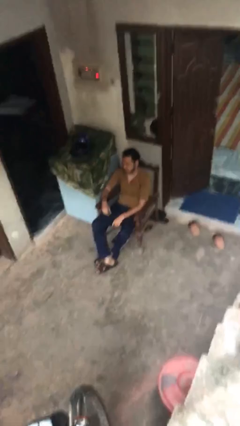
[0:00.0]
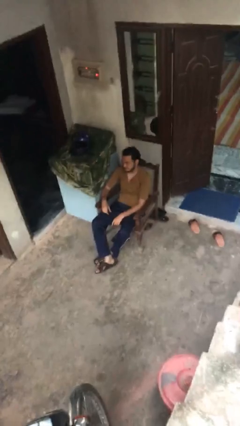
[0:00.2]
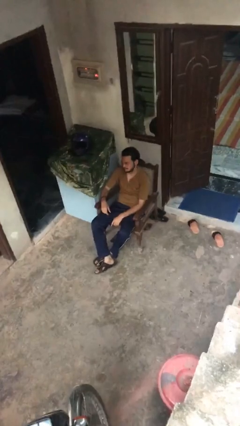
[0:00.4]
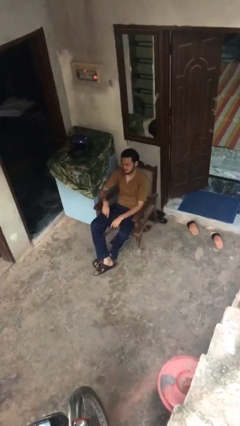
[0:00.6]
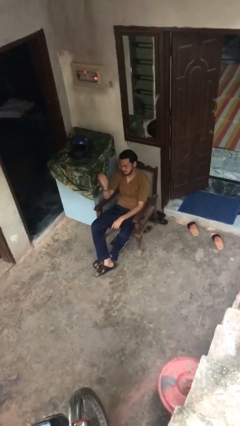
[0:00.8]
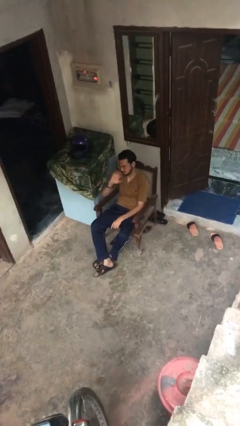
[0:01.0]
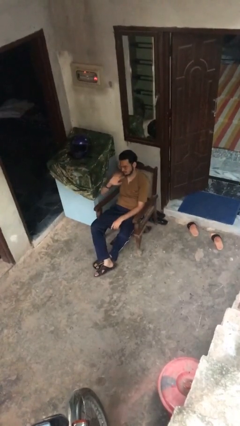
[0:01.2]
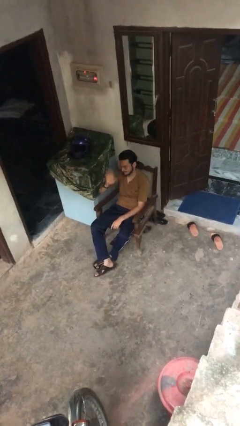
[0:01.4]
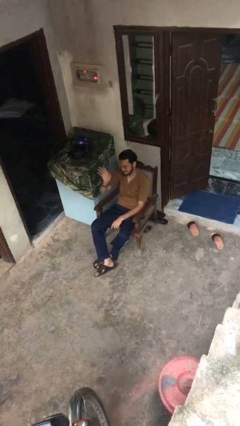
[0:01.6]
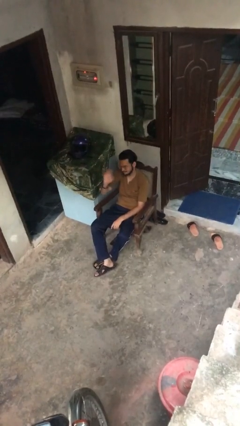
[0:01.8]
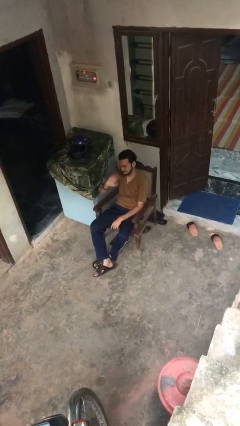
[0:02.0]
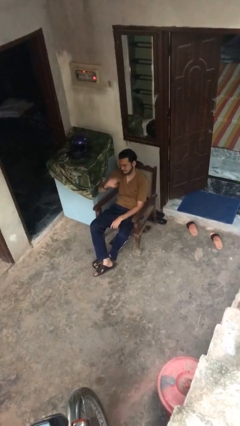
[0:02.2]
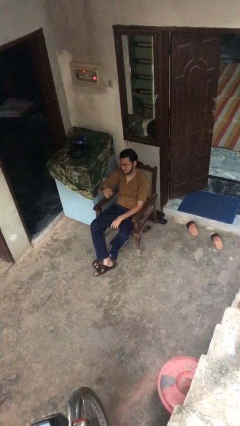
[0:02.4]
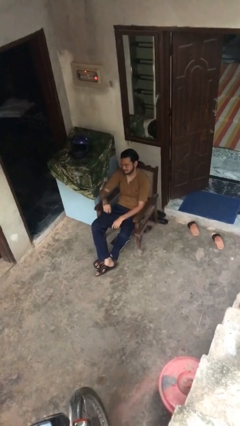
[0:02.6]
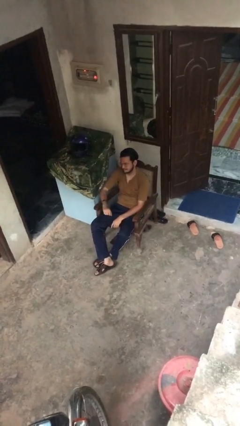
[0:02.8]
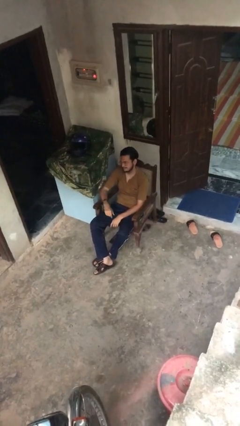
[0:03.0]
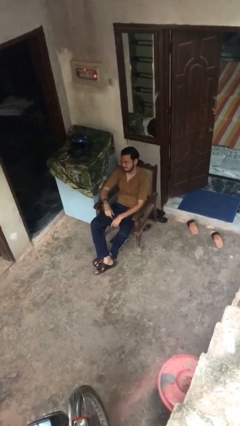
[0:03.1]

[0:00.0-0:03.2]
person waves at person

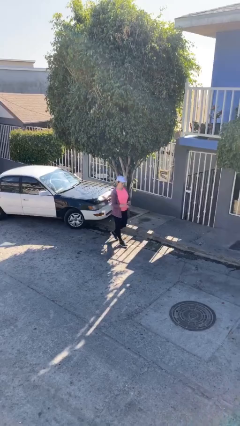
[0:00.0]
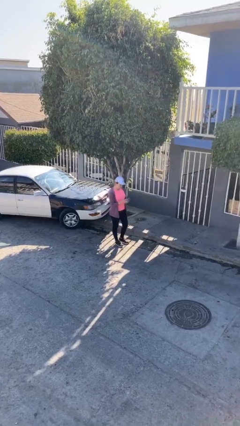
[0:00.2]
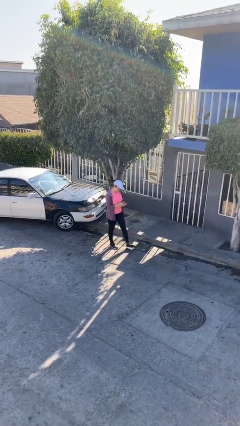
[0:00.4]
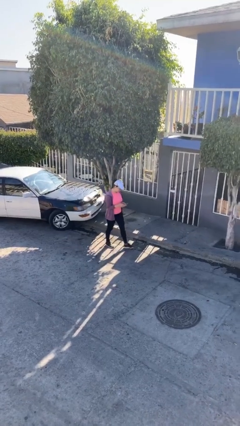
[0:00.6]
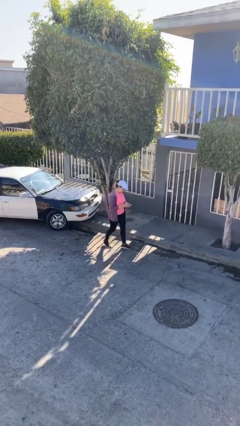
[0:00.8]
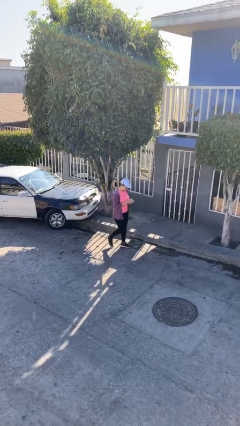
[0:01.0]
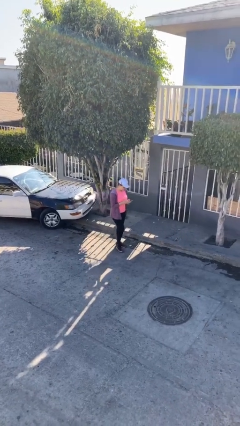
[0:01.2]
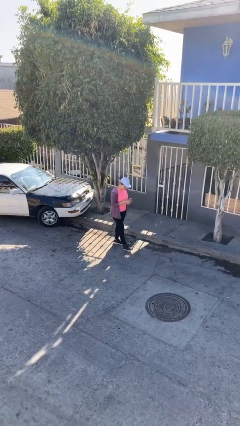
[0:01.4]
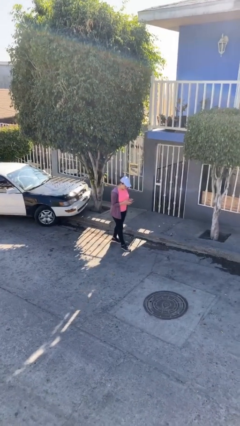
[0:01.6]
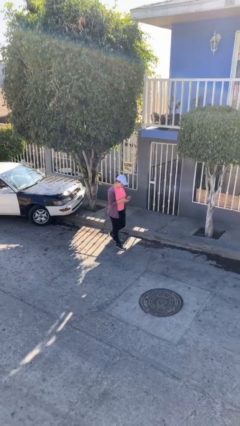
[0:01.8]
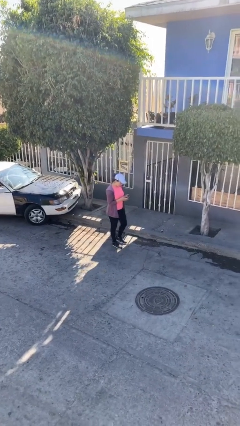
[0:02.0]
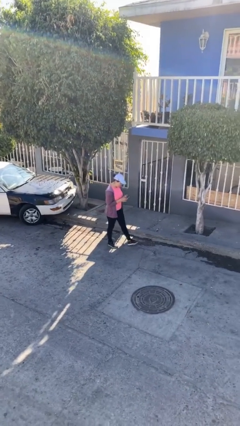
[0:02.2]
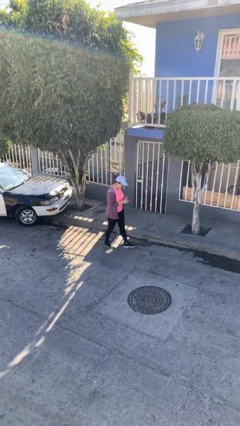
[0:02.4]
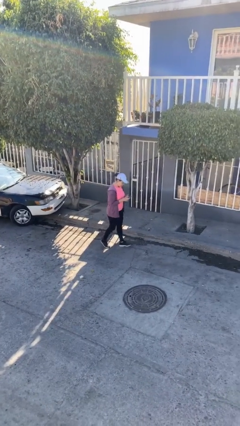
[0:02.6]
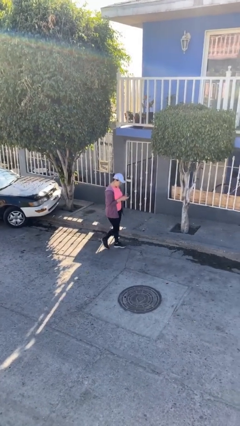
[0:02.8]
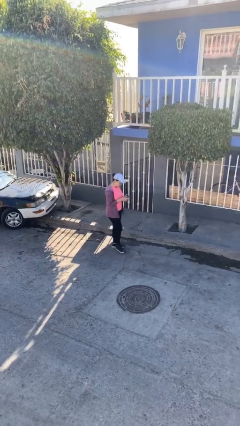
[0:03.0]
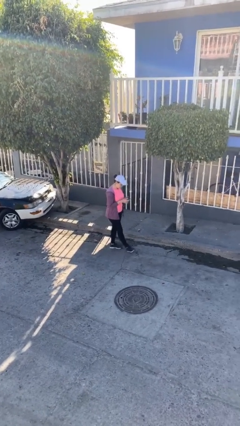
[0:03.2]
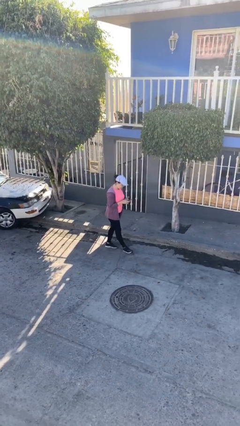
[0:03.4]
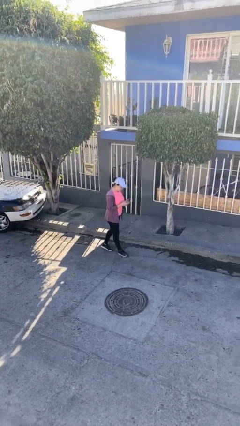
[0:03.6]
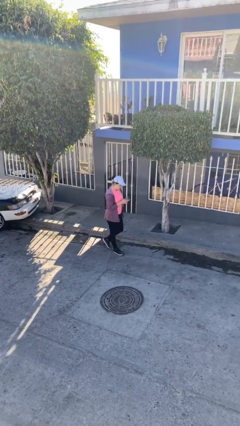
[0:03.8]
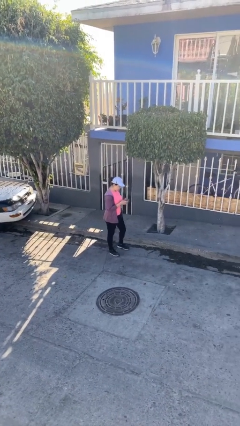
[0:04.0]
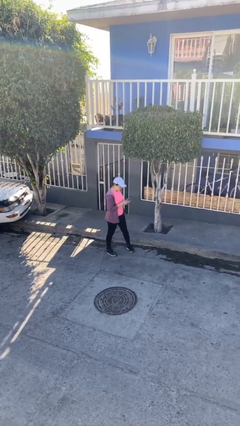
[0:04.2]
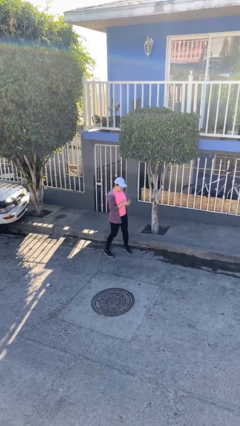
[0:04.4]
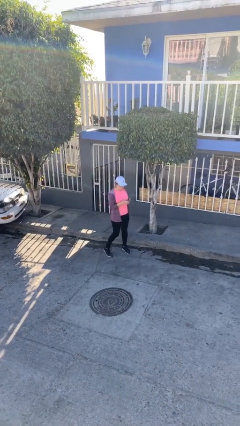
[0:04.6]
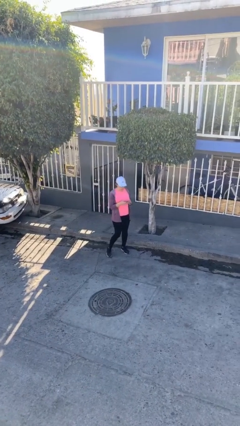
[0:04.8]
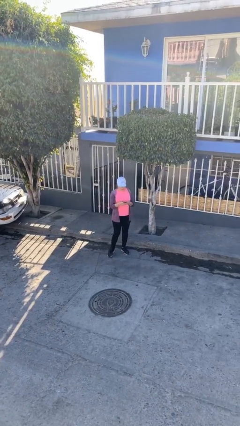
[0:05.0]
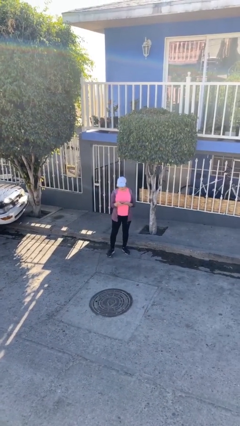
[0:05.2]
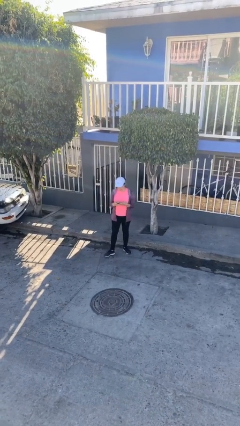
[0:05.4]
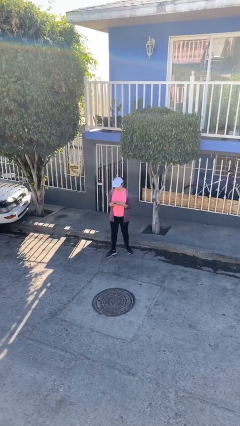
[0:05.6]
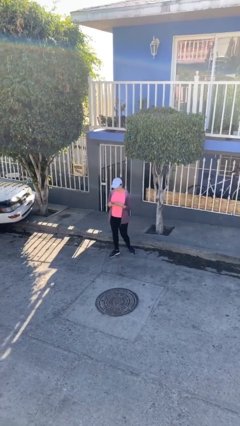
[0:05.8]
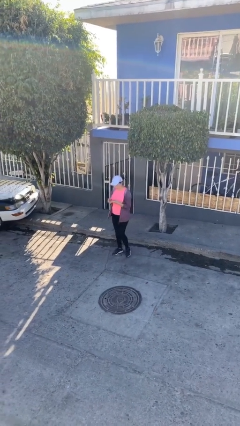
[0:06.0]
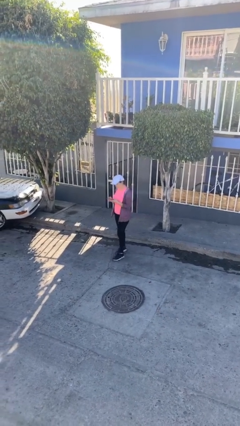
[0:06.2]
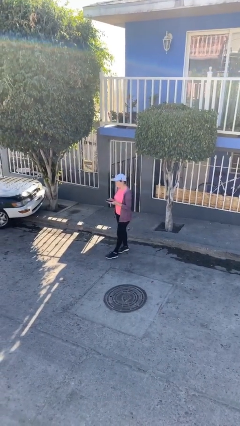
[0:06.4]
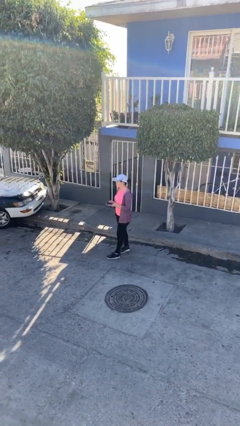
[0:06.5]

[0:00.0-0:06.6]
person texts on phone

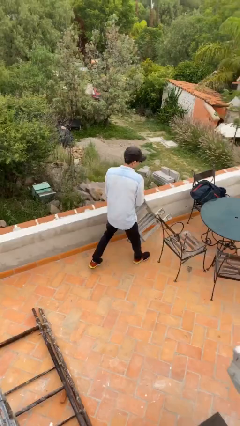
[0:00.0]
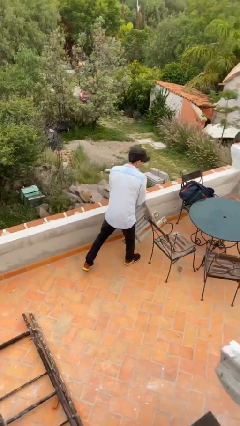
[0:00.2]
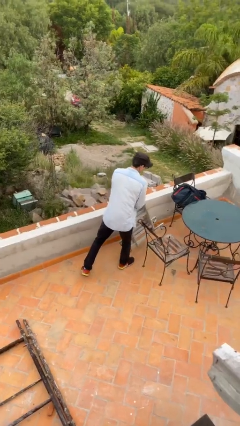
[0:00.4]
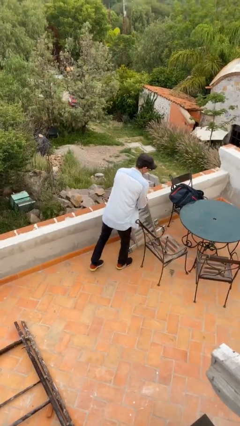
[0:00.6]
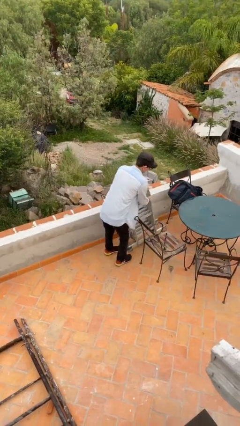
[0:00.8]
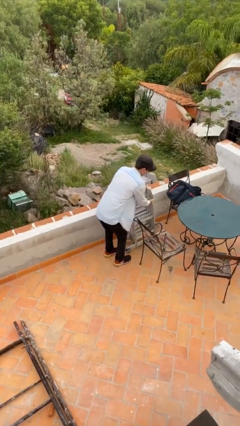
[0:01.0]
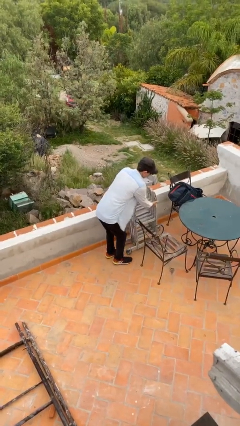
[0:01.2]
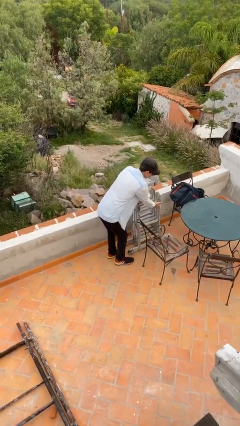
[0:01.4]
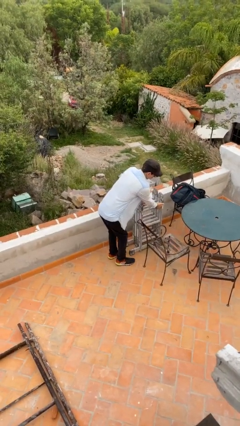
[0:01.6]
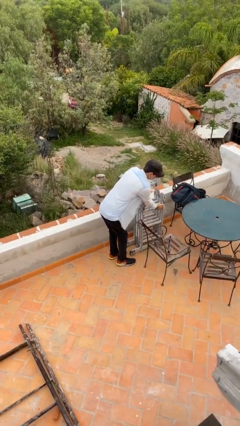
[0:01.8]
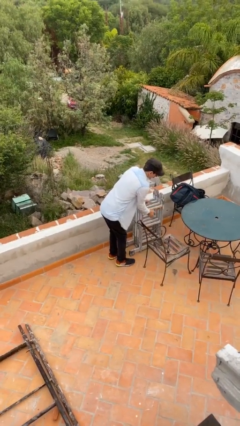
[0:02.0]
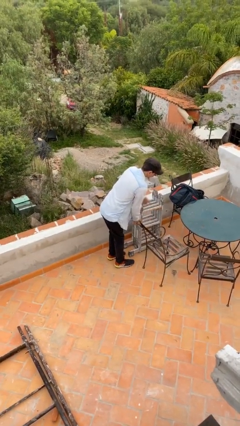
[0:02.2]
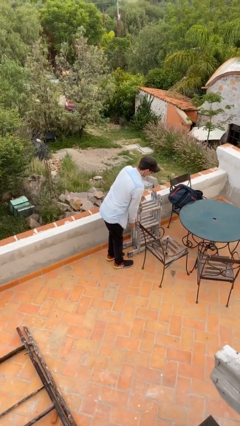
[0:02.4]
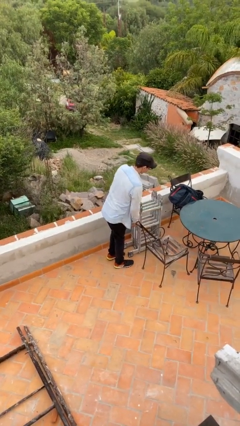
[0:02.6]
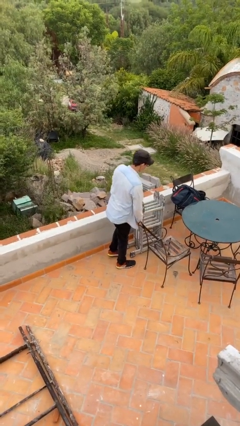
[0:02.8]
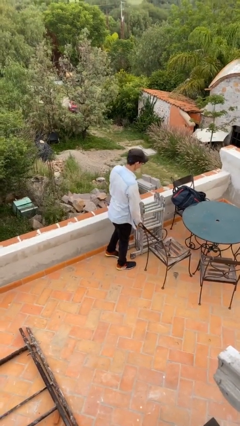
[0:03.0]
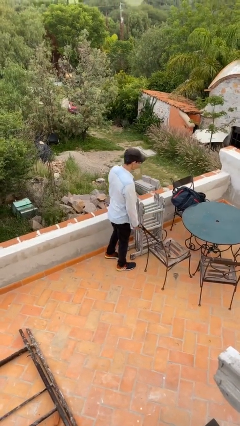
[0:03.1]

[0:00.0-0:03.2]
person puts down object on floor

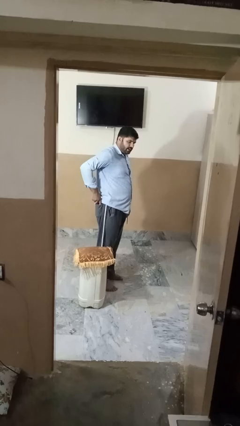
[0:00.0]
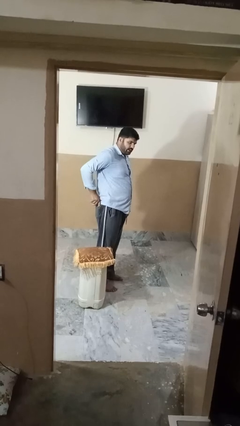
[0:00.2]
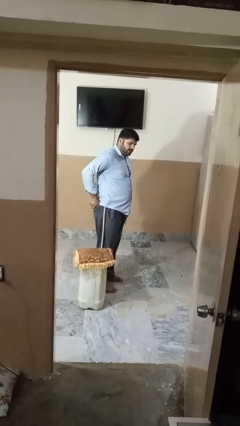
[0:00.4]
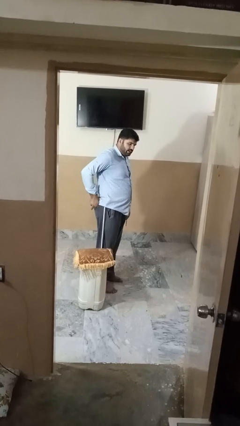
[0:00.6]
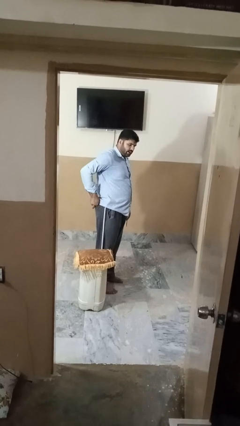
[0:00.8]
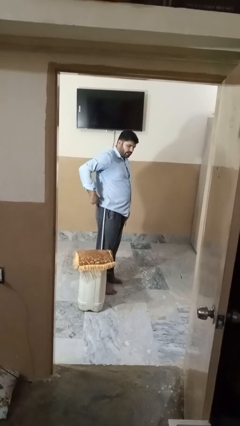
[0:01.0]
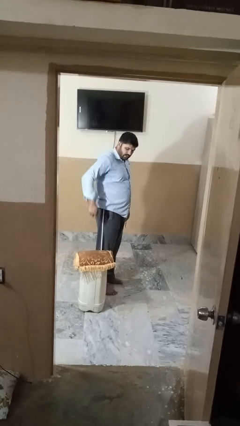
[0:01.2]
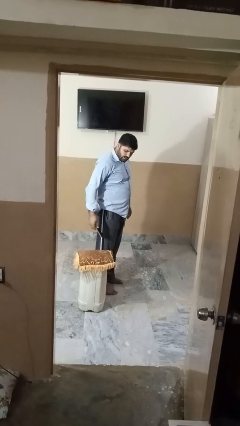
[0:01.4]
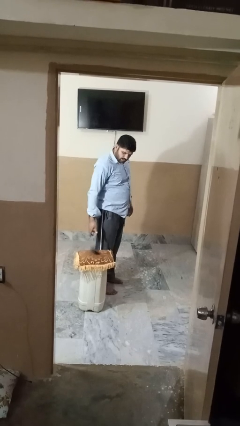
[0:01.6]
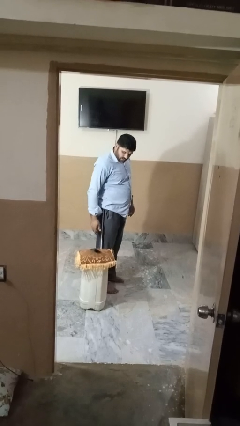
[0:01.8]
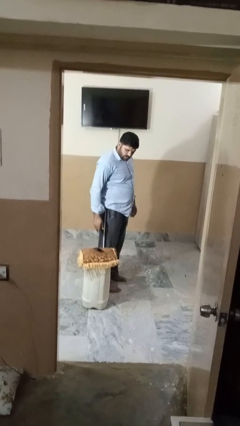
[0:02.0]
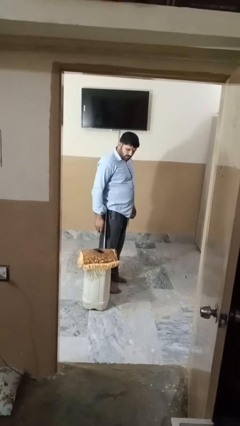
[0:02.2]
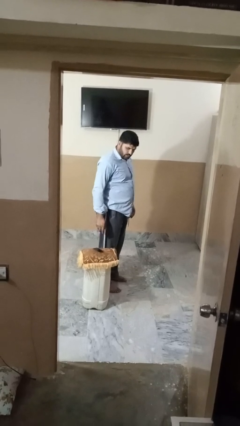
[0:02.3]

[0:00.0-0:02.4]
person puts phone into pocket

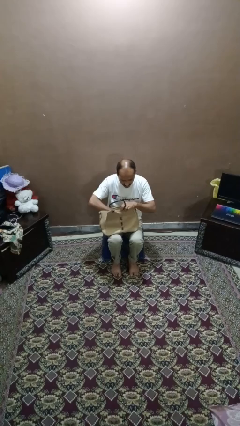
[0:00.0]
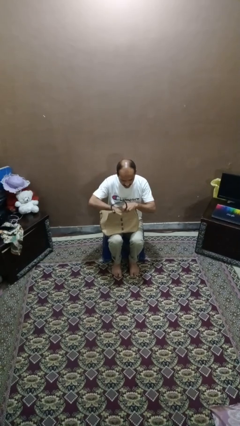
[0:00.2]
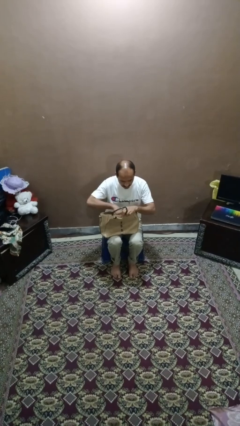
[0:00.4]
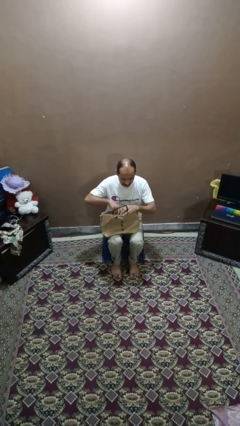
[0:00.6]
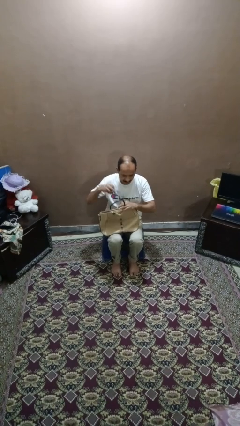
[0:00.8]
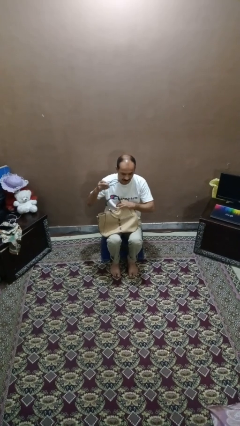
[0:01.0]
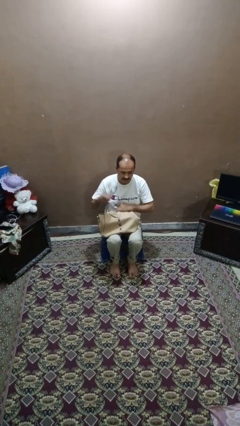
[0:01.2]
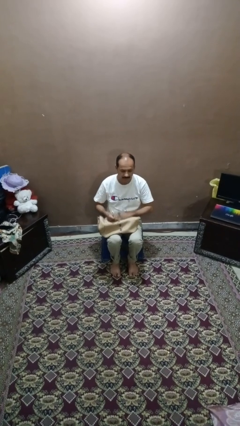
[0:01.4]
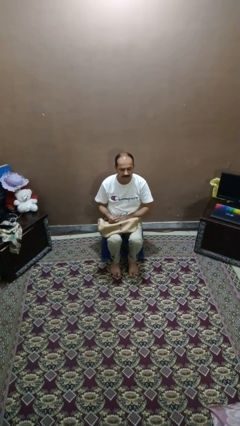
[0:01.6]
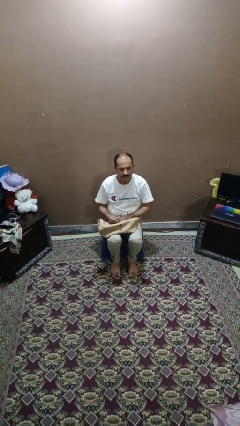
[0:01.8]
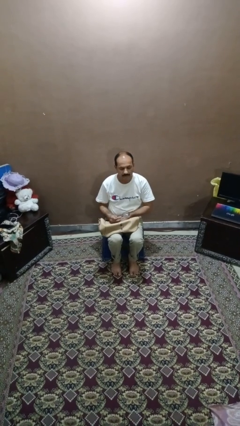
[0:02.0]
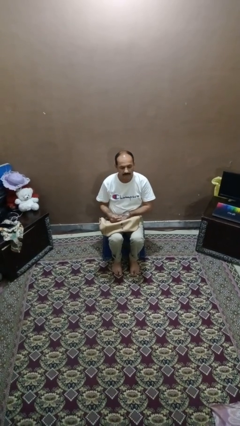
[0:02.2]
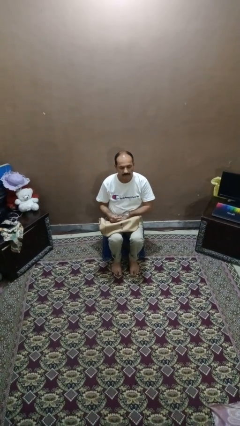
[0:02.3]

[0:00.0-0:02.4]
person takes object from purse
